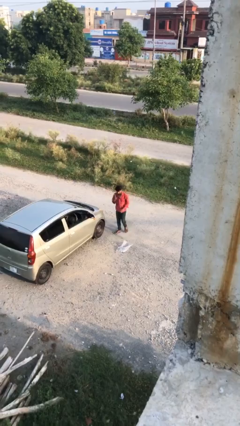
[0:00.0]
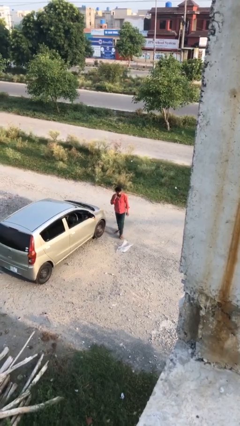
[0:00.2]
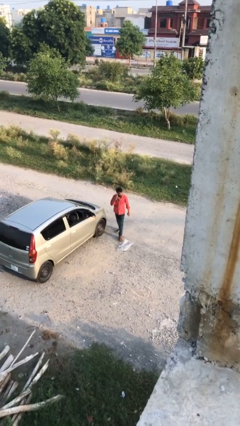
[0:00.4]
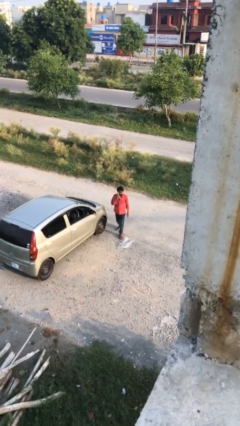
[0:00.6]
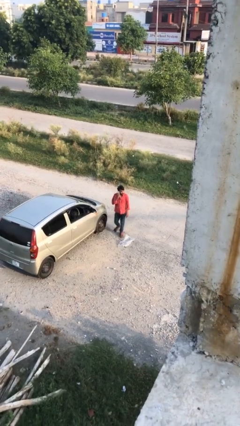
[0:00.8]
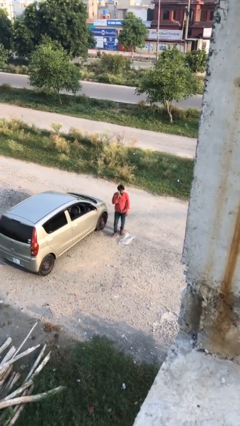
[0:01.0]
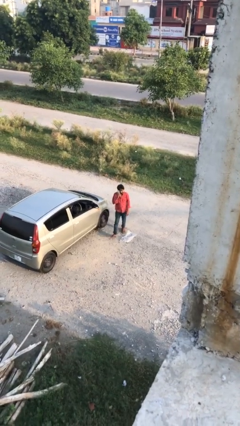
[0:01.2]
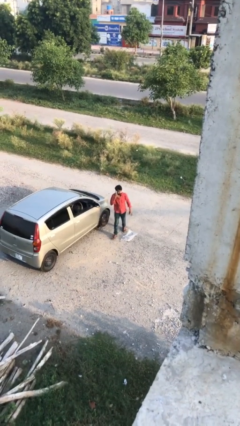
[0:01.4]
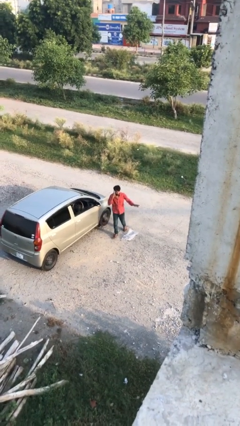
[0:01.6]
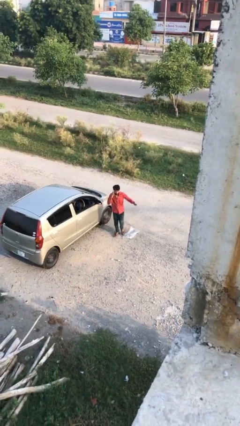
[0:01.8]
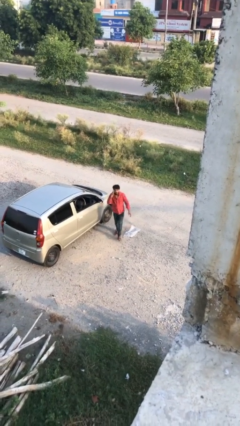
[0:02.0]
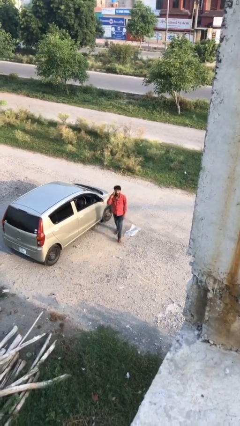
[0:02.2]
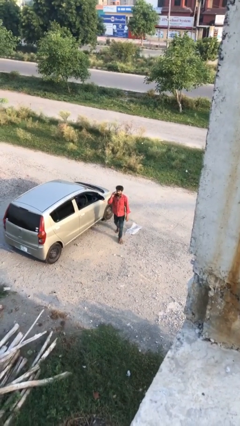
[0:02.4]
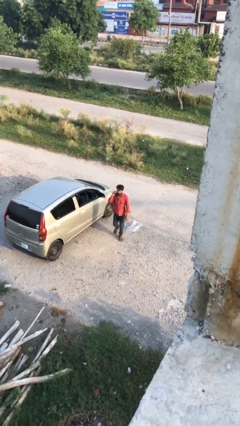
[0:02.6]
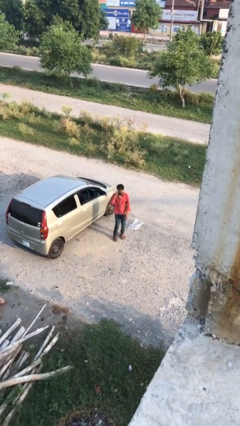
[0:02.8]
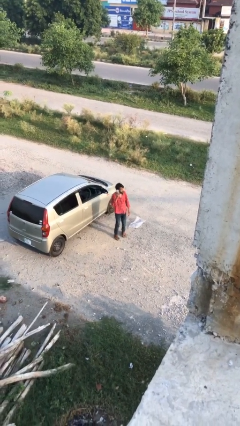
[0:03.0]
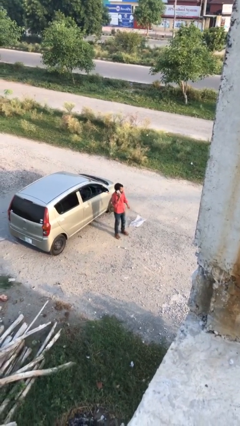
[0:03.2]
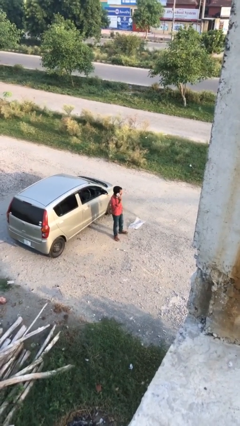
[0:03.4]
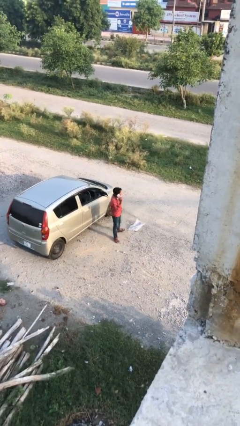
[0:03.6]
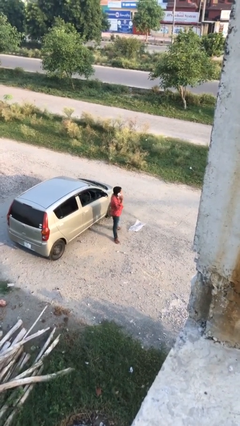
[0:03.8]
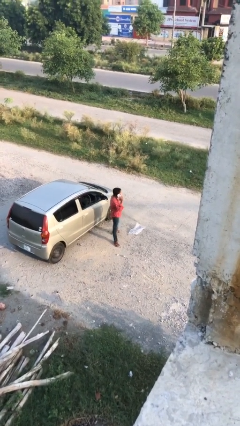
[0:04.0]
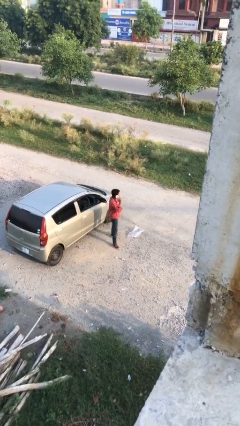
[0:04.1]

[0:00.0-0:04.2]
person talks on phone

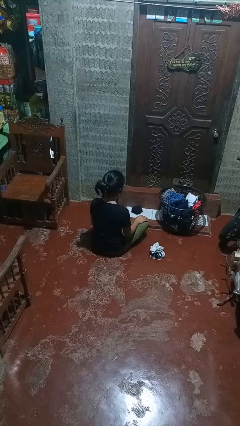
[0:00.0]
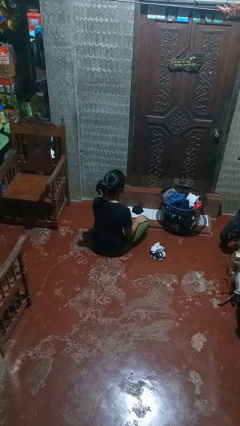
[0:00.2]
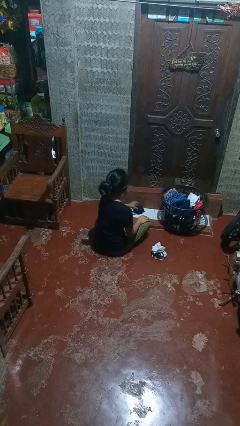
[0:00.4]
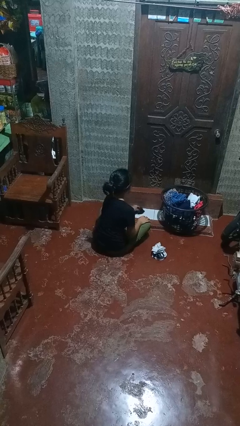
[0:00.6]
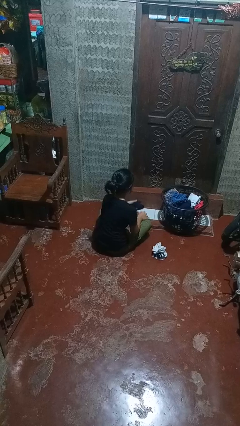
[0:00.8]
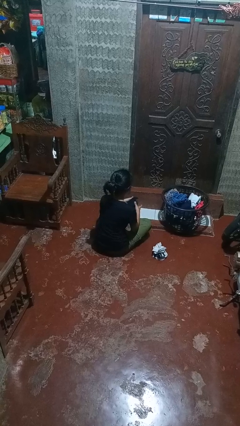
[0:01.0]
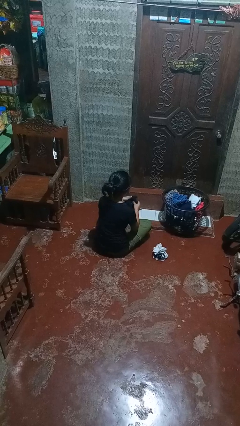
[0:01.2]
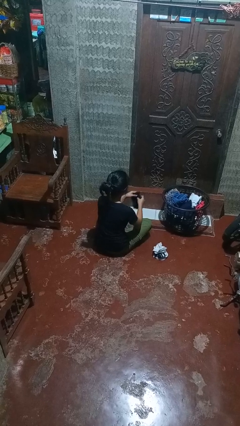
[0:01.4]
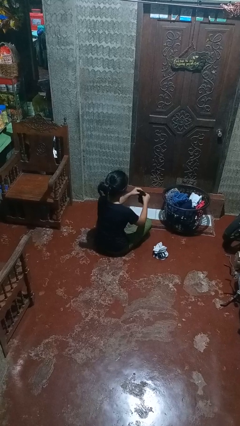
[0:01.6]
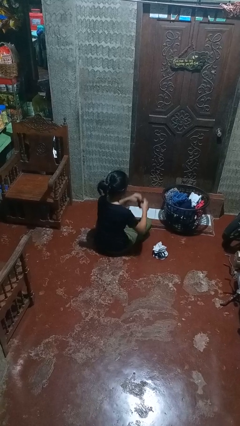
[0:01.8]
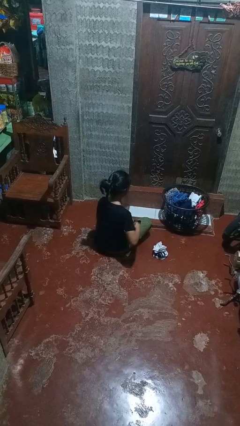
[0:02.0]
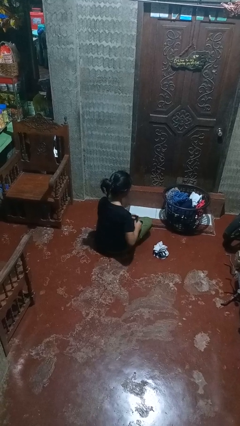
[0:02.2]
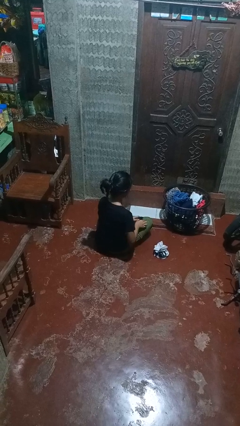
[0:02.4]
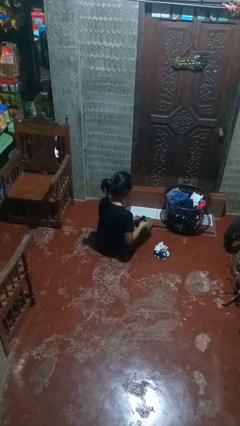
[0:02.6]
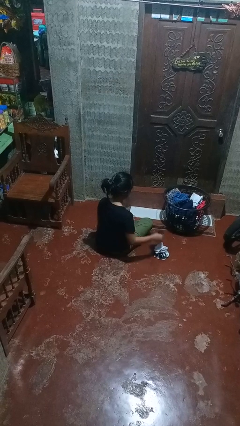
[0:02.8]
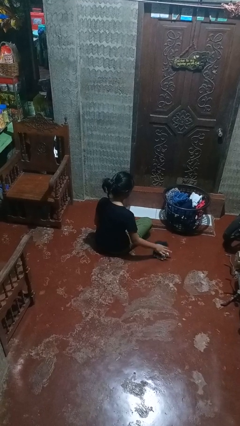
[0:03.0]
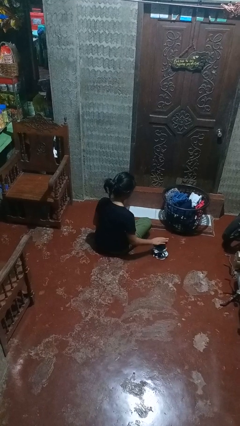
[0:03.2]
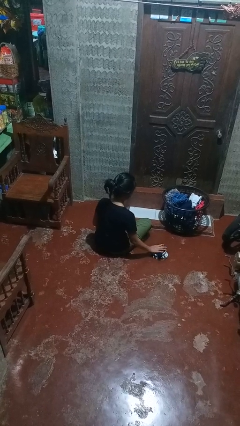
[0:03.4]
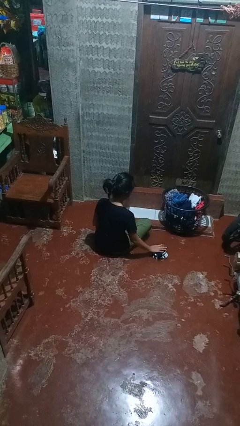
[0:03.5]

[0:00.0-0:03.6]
person folds socks

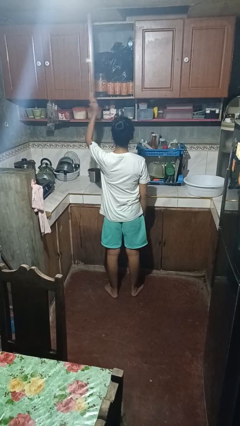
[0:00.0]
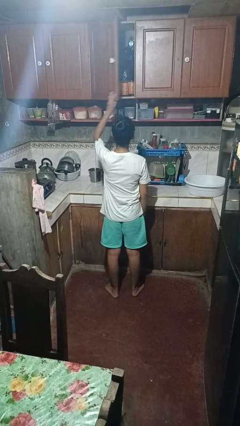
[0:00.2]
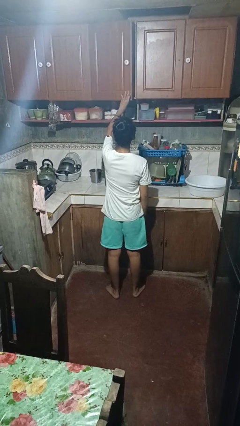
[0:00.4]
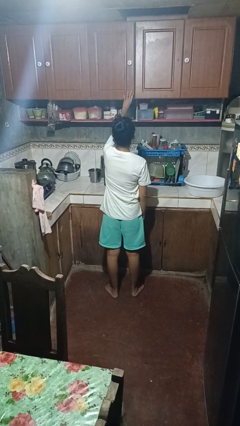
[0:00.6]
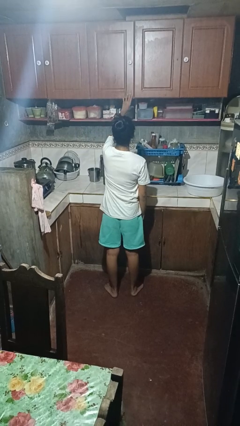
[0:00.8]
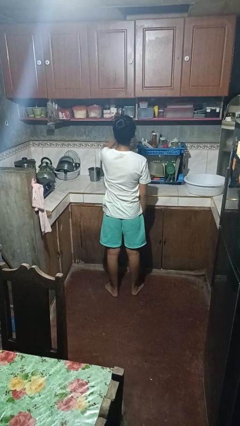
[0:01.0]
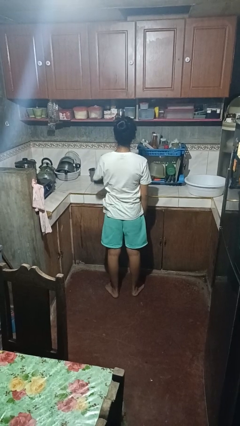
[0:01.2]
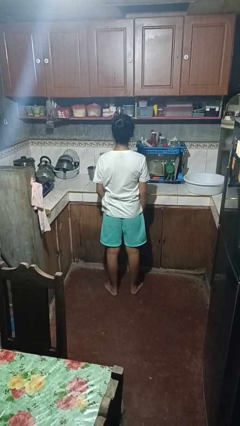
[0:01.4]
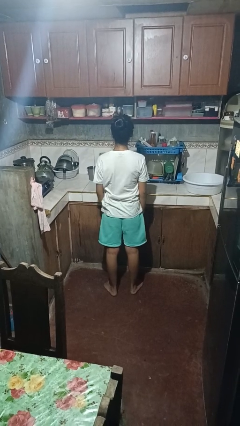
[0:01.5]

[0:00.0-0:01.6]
person closes cabinet

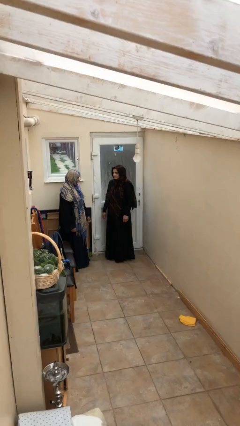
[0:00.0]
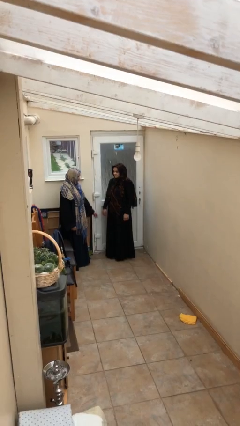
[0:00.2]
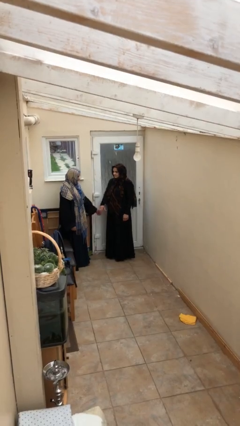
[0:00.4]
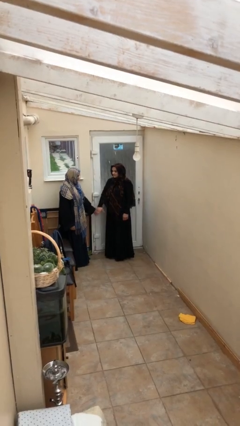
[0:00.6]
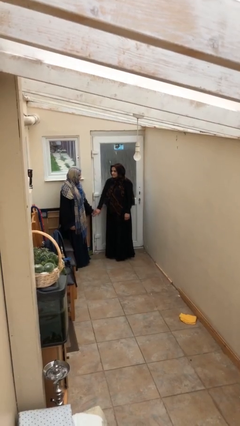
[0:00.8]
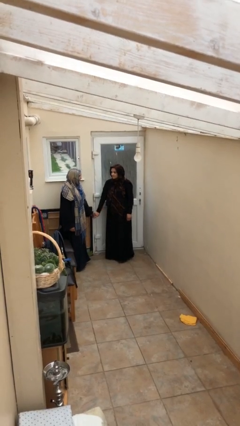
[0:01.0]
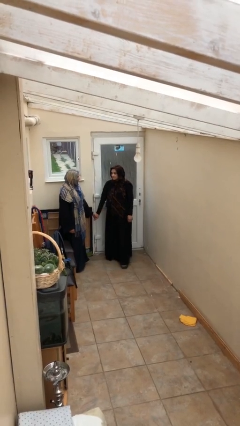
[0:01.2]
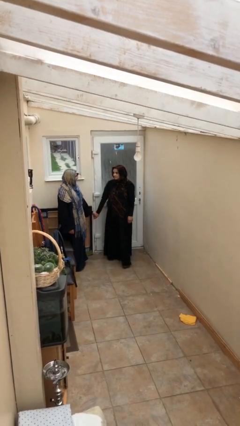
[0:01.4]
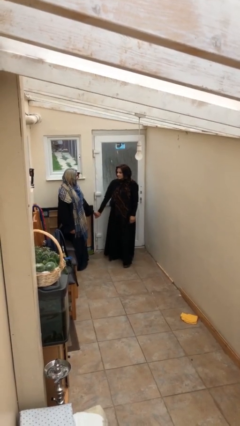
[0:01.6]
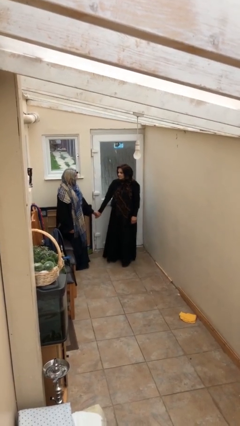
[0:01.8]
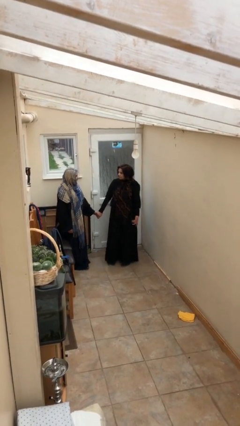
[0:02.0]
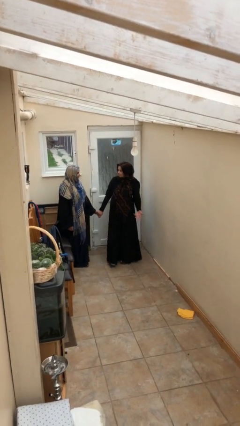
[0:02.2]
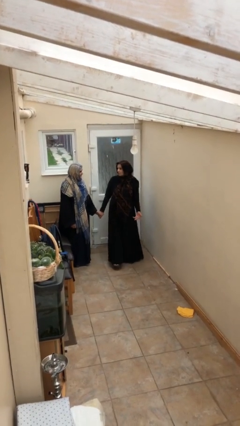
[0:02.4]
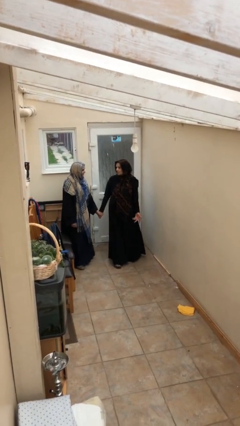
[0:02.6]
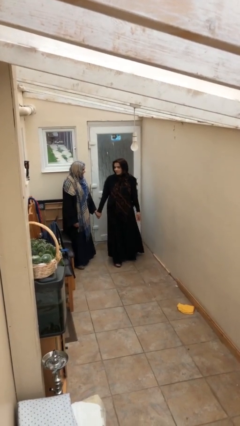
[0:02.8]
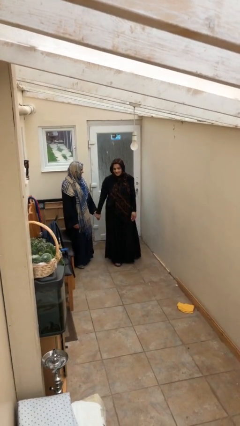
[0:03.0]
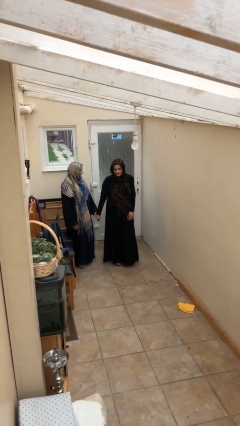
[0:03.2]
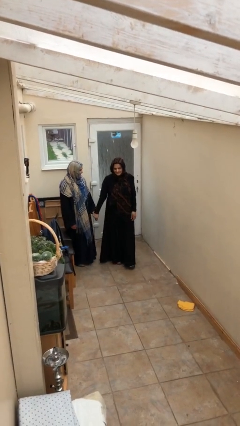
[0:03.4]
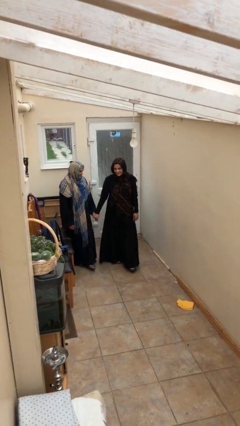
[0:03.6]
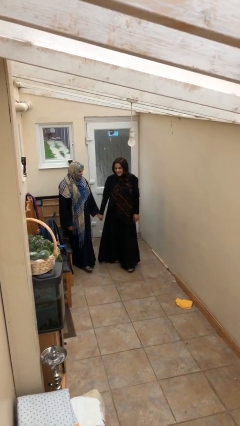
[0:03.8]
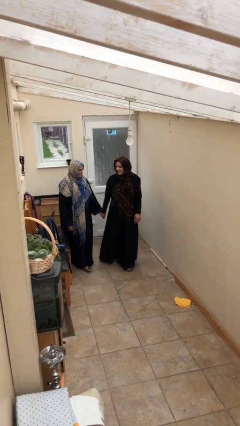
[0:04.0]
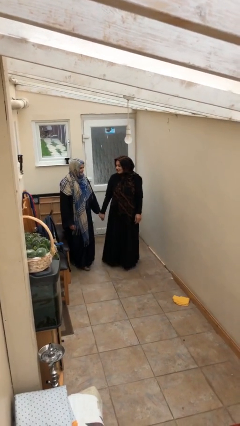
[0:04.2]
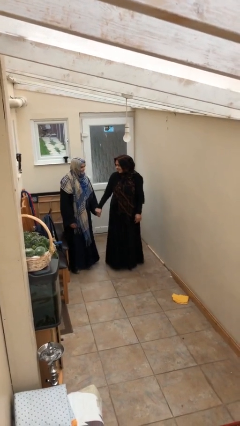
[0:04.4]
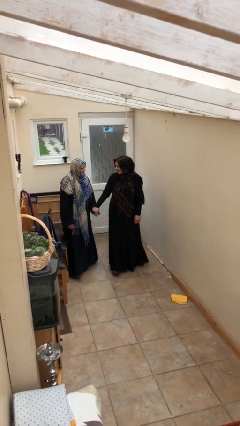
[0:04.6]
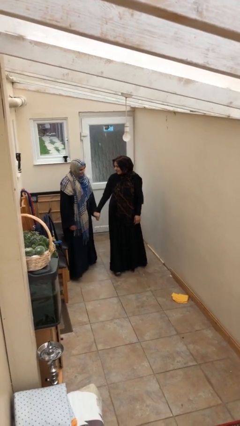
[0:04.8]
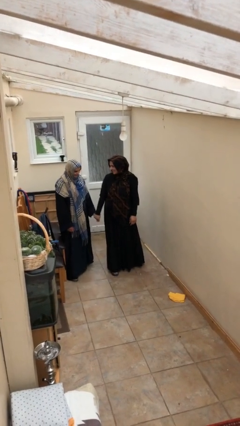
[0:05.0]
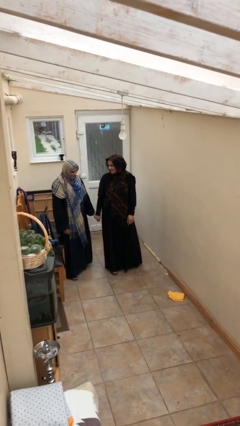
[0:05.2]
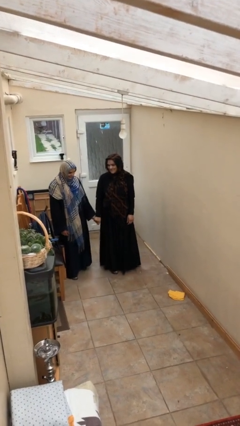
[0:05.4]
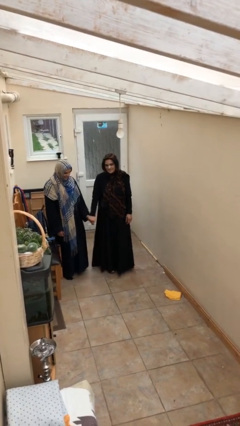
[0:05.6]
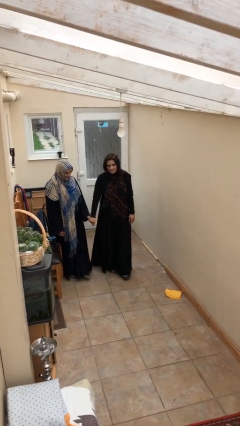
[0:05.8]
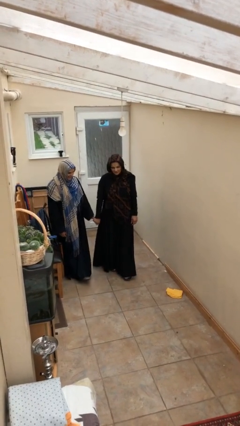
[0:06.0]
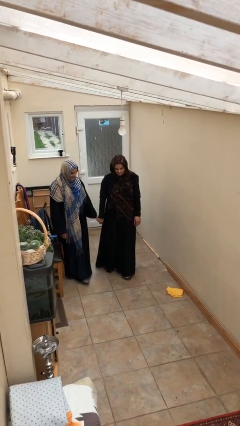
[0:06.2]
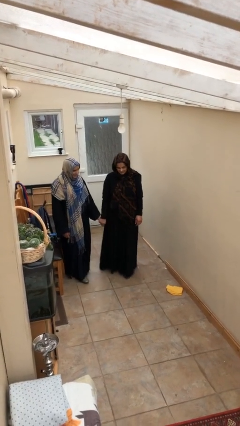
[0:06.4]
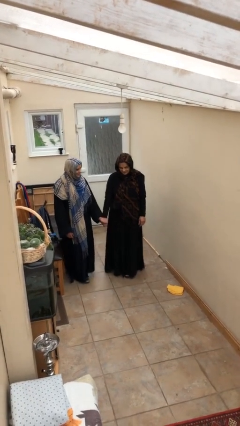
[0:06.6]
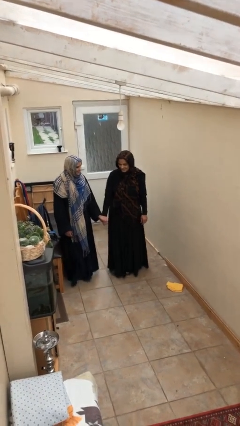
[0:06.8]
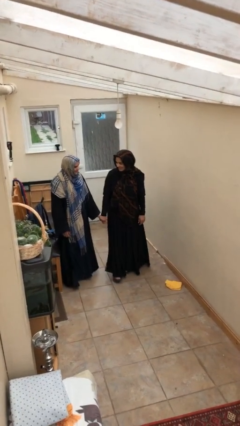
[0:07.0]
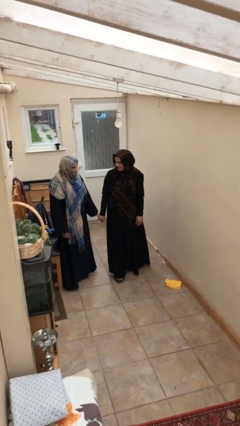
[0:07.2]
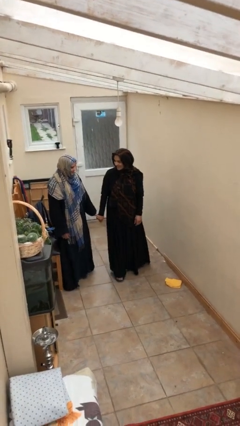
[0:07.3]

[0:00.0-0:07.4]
person holds hand

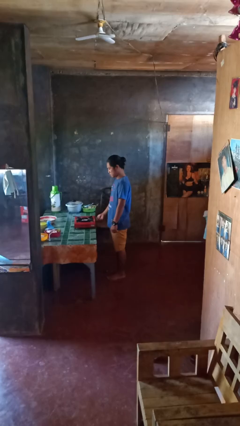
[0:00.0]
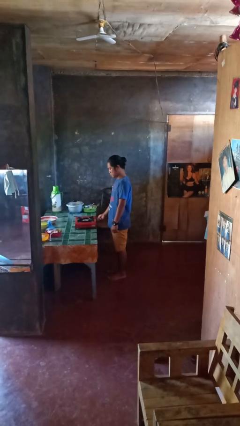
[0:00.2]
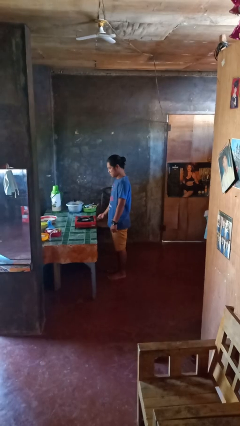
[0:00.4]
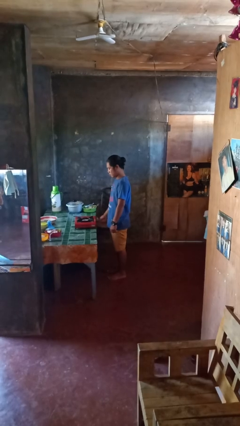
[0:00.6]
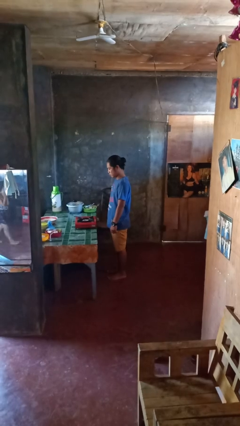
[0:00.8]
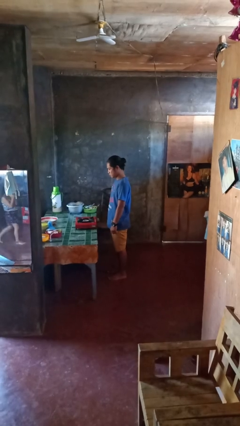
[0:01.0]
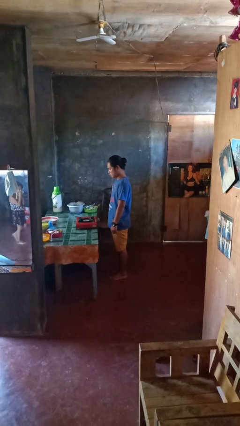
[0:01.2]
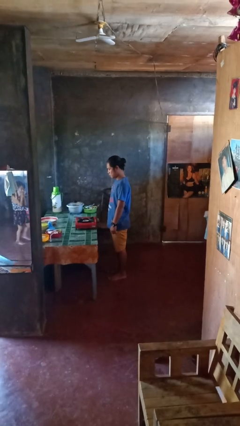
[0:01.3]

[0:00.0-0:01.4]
person turns off stovetop
